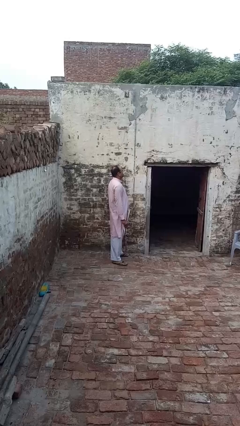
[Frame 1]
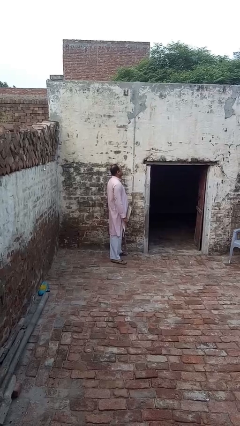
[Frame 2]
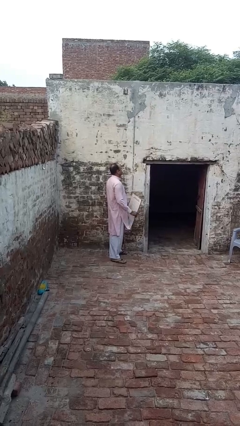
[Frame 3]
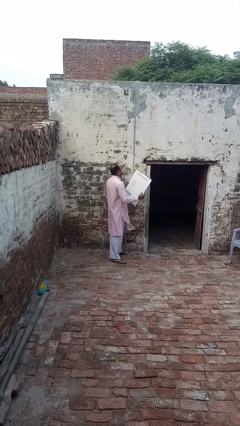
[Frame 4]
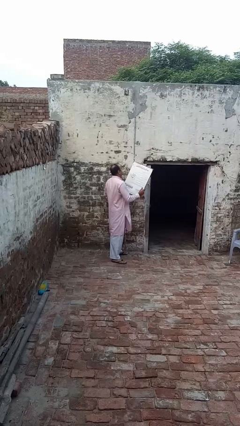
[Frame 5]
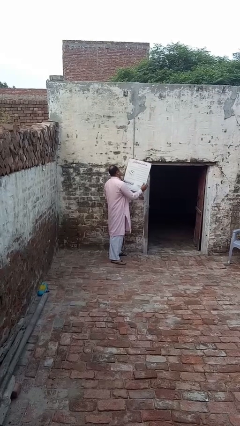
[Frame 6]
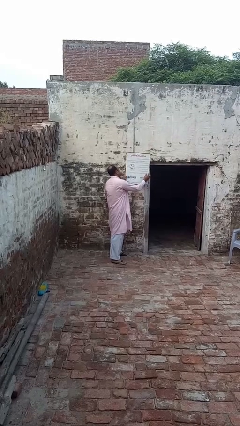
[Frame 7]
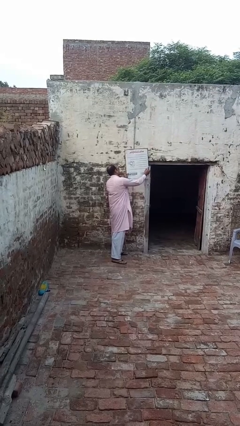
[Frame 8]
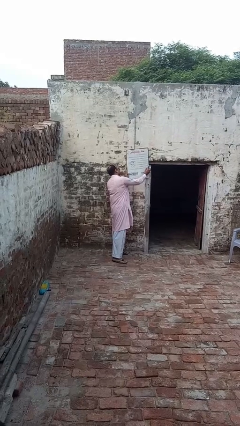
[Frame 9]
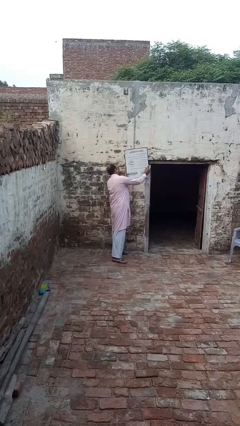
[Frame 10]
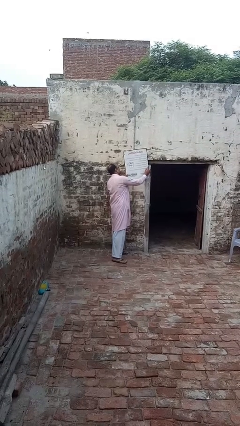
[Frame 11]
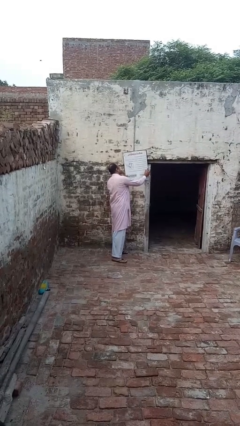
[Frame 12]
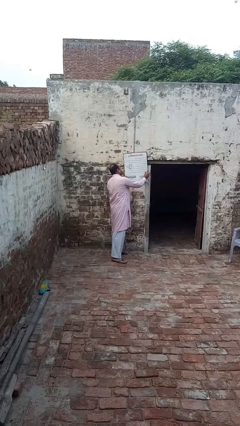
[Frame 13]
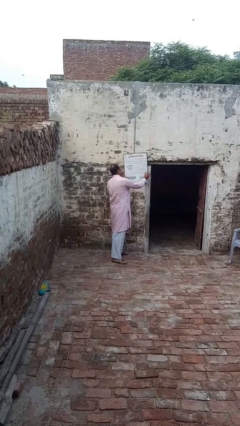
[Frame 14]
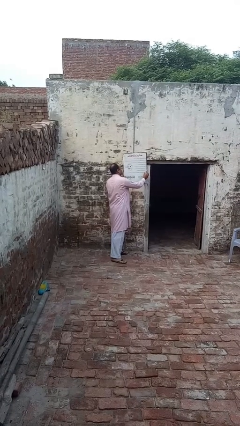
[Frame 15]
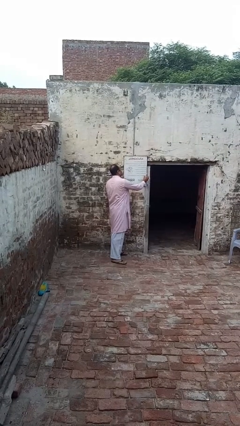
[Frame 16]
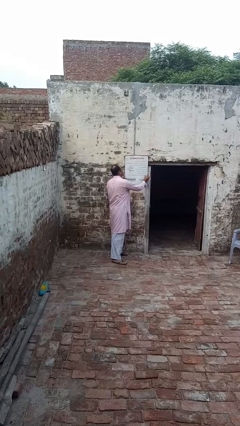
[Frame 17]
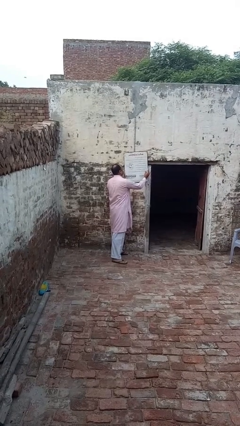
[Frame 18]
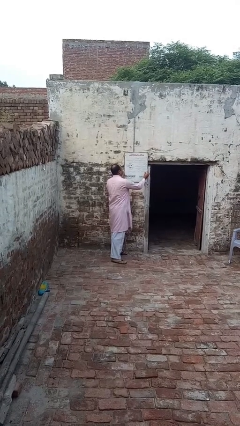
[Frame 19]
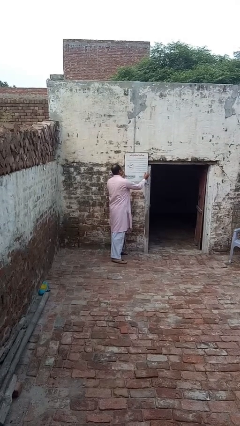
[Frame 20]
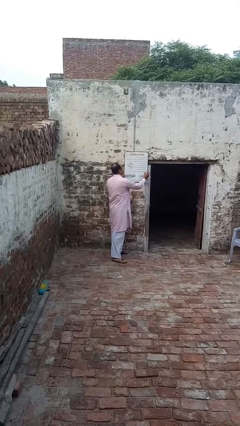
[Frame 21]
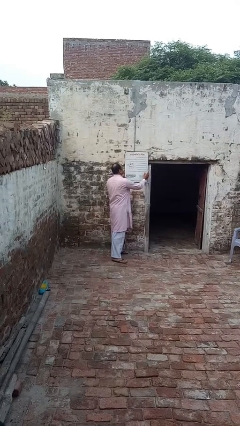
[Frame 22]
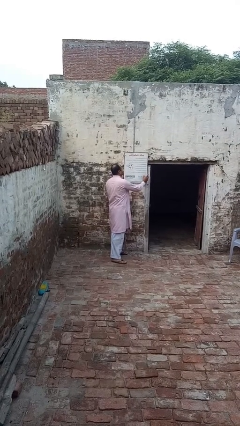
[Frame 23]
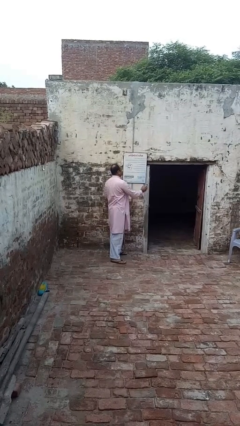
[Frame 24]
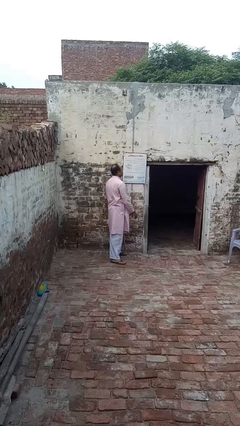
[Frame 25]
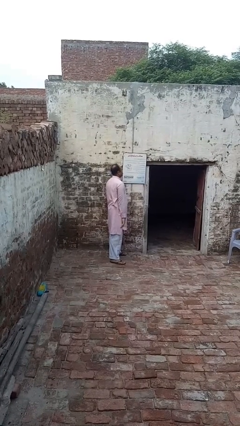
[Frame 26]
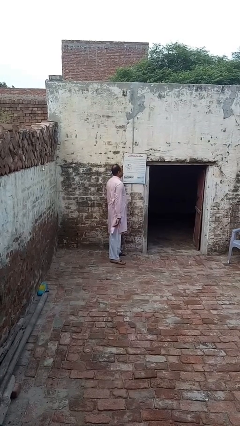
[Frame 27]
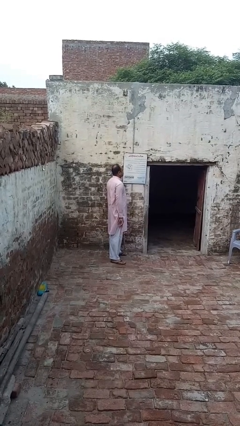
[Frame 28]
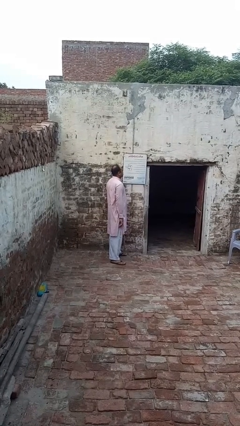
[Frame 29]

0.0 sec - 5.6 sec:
person puts up picture frame

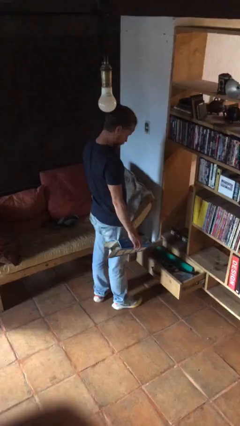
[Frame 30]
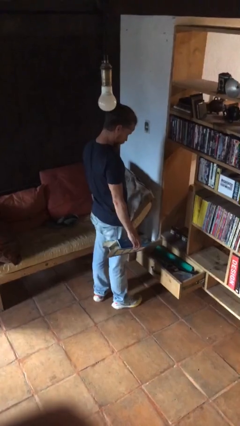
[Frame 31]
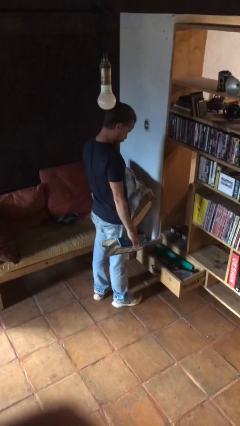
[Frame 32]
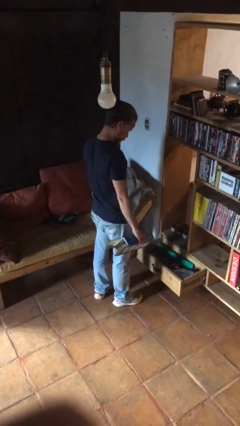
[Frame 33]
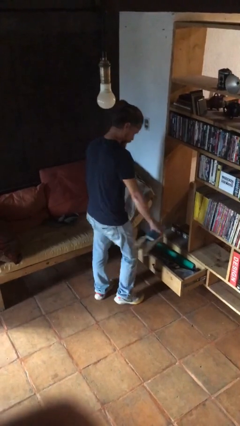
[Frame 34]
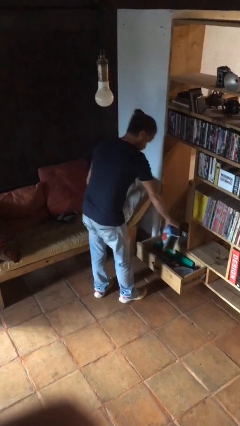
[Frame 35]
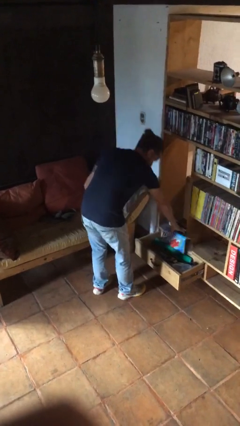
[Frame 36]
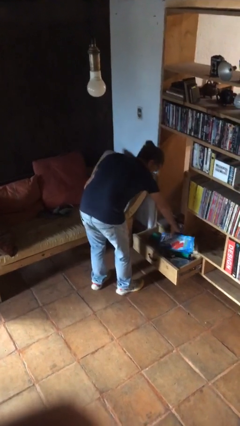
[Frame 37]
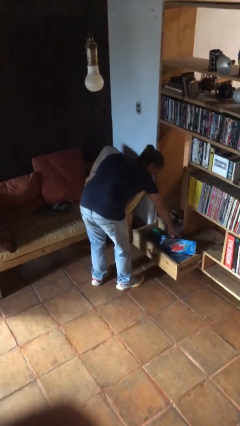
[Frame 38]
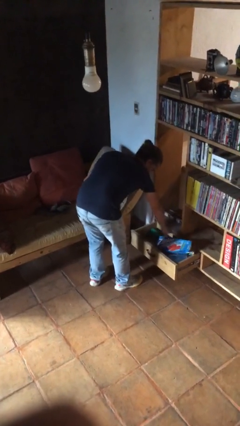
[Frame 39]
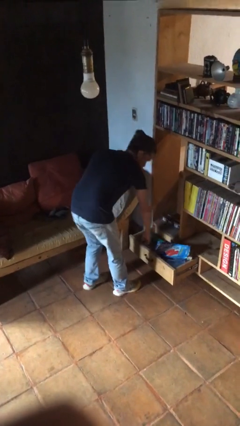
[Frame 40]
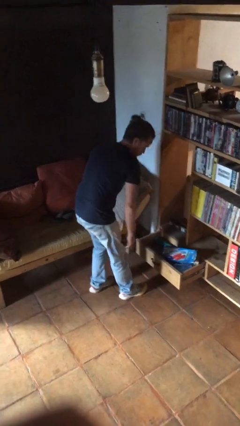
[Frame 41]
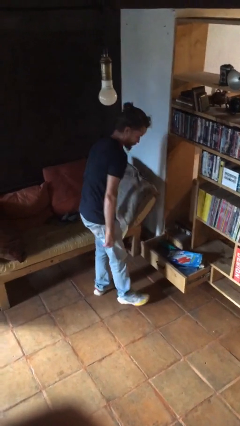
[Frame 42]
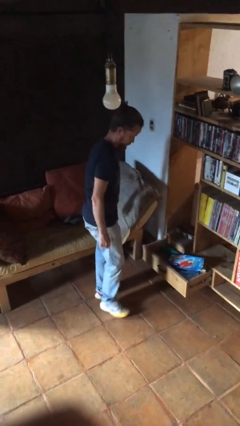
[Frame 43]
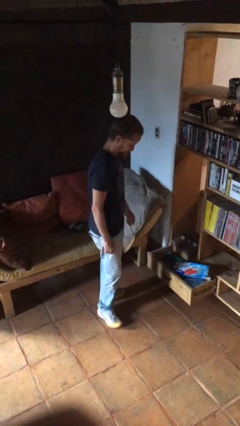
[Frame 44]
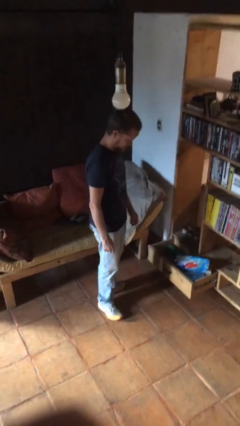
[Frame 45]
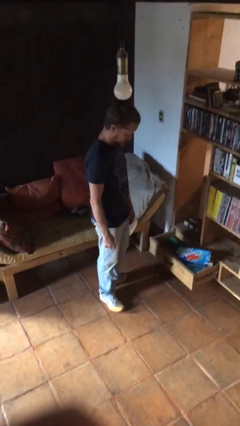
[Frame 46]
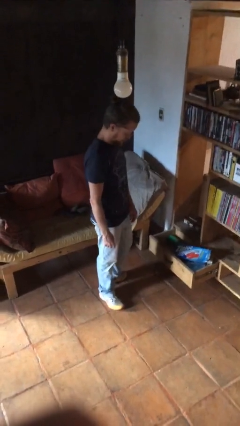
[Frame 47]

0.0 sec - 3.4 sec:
person puts down object into cabinet

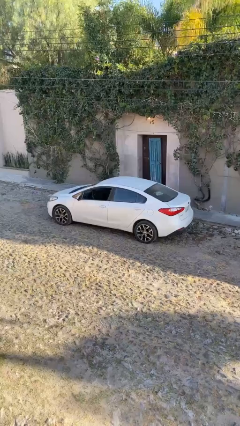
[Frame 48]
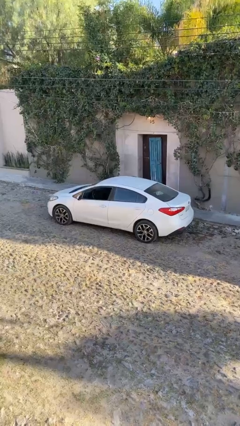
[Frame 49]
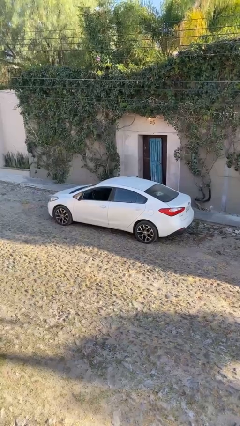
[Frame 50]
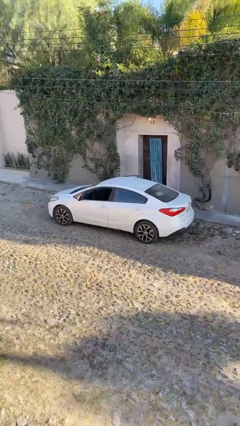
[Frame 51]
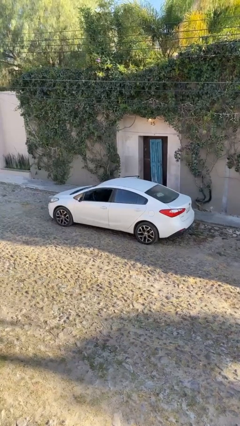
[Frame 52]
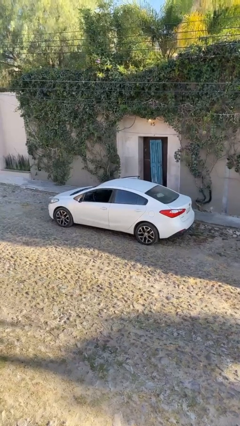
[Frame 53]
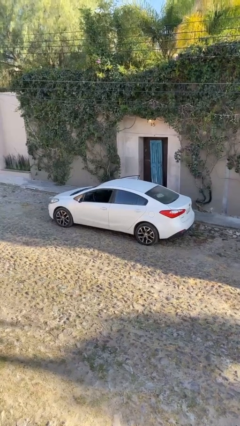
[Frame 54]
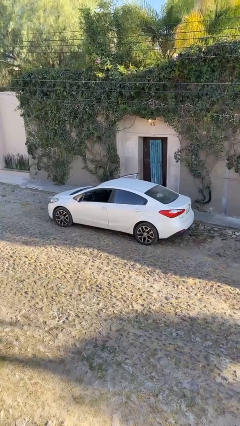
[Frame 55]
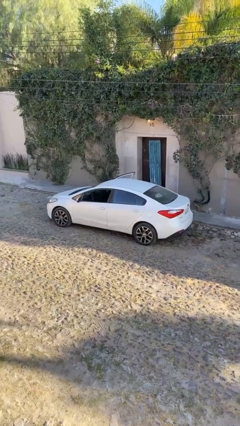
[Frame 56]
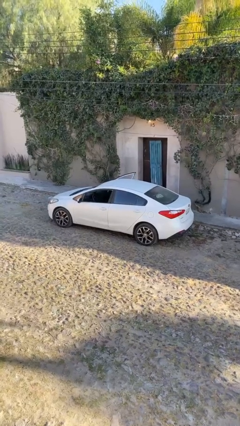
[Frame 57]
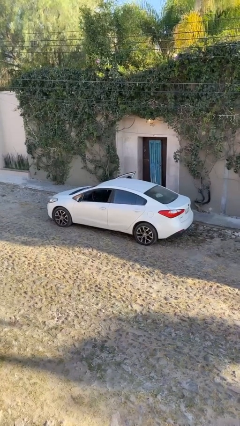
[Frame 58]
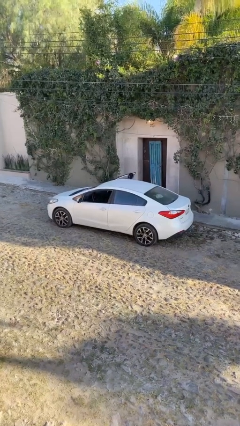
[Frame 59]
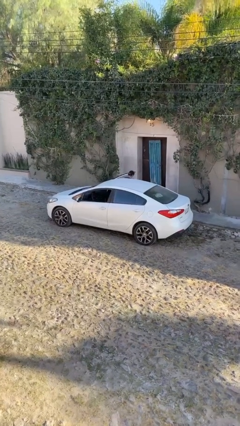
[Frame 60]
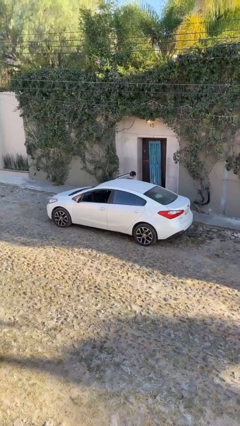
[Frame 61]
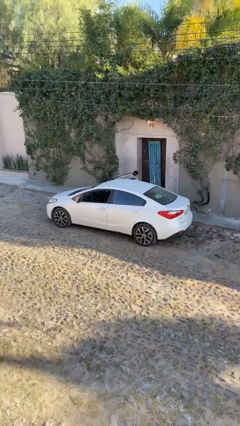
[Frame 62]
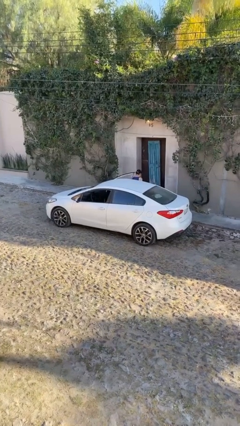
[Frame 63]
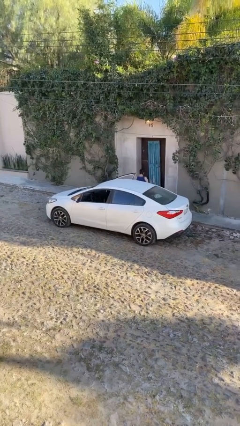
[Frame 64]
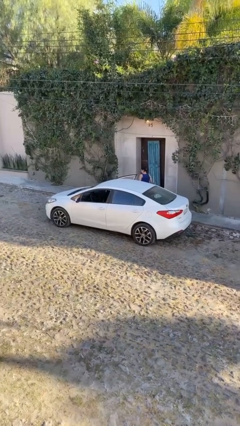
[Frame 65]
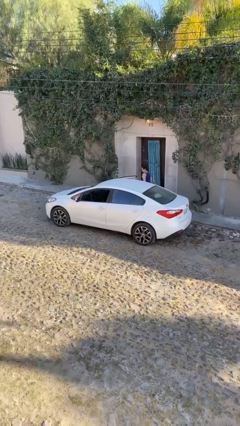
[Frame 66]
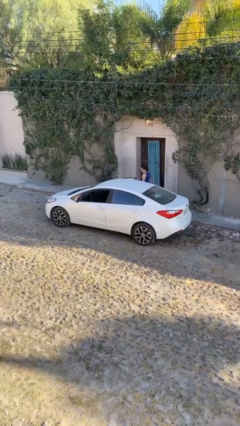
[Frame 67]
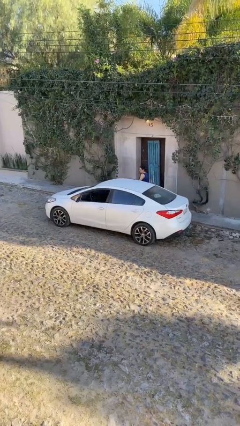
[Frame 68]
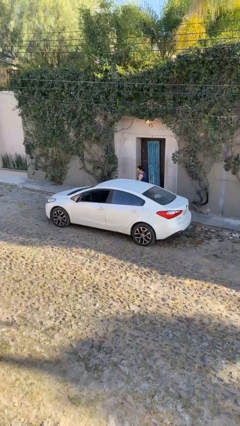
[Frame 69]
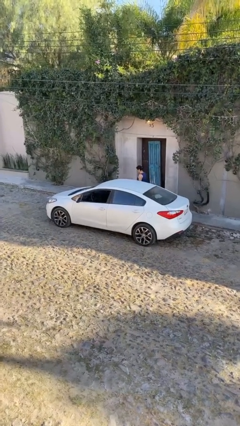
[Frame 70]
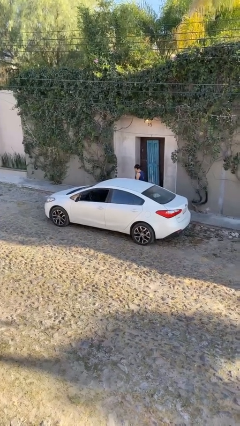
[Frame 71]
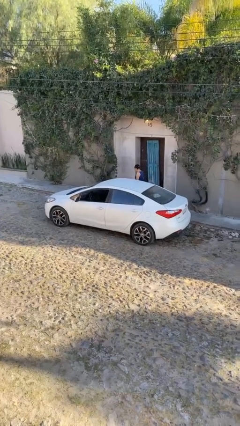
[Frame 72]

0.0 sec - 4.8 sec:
car drops off person

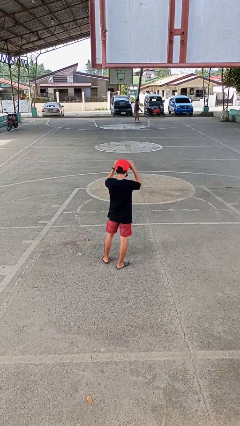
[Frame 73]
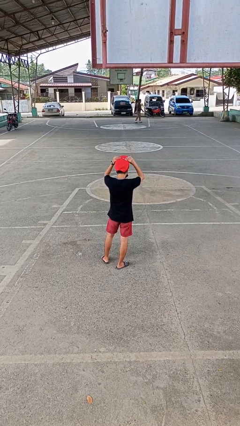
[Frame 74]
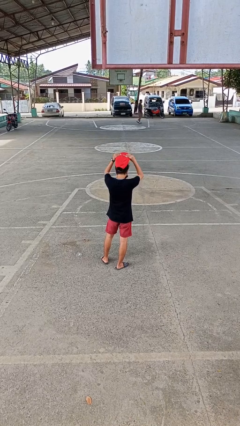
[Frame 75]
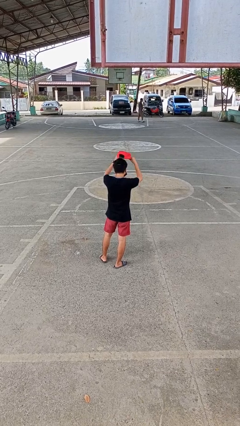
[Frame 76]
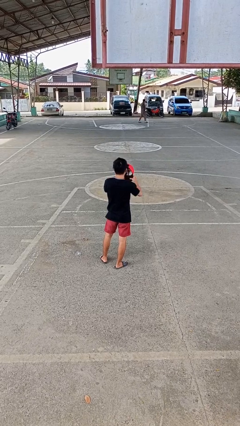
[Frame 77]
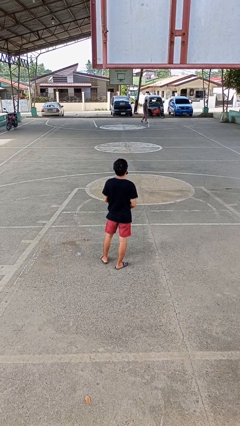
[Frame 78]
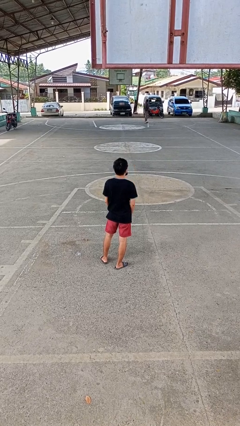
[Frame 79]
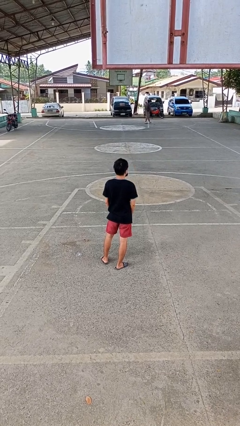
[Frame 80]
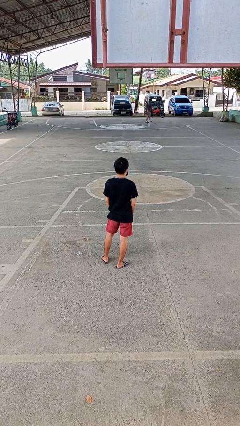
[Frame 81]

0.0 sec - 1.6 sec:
person takes off hat

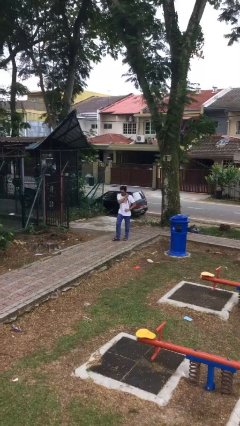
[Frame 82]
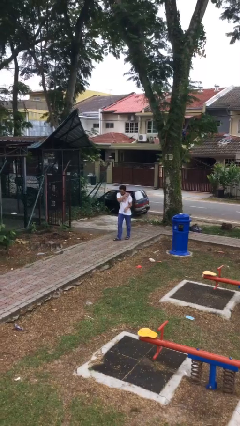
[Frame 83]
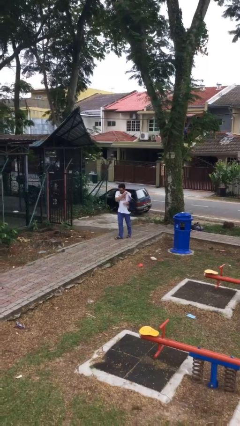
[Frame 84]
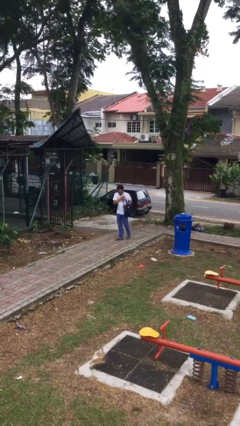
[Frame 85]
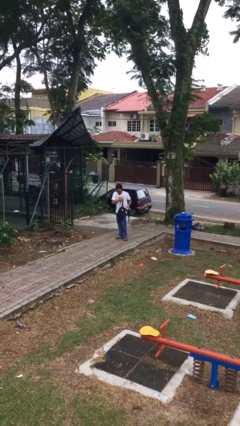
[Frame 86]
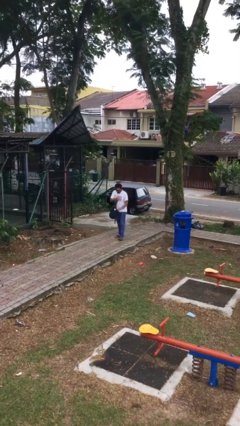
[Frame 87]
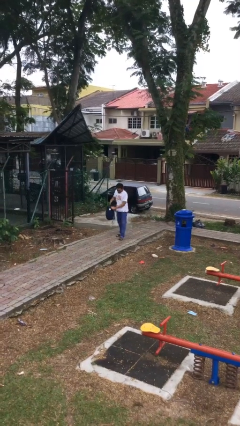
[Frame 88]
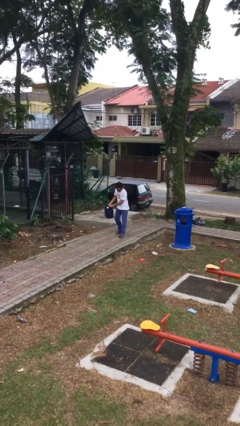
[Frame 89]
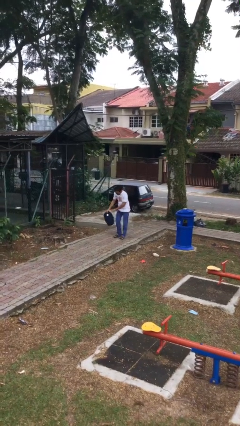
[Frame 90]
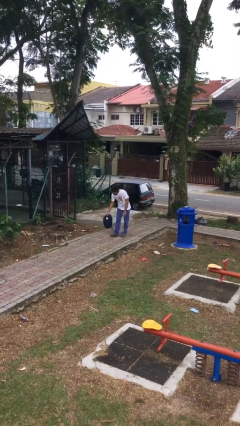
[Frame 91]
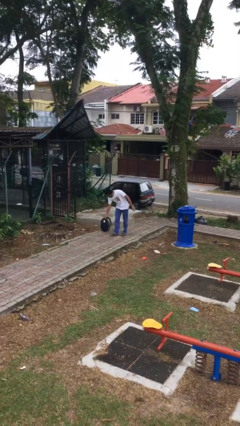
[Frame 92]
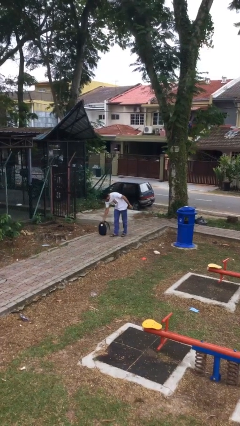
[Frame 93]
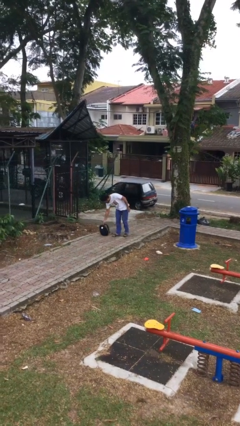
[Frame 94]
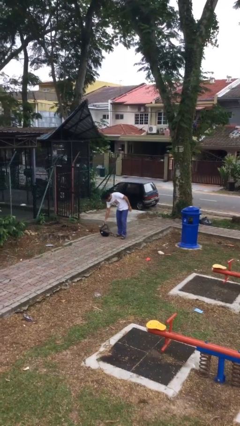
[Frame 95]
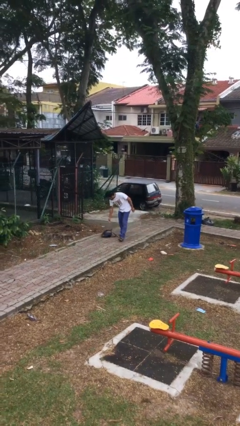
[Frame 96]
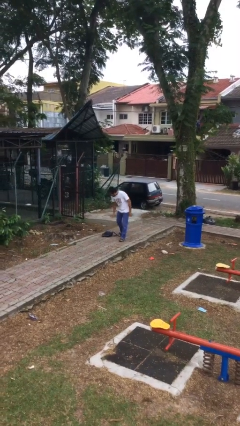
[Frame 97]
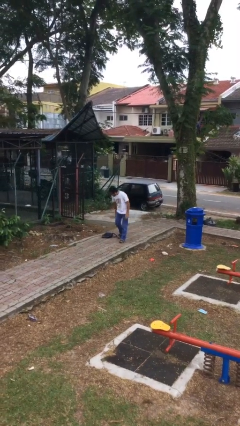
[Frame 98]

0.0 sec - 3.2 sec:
person puts down object on floor
